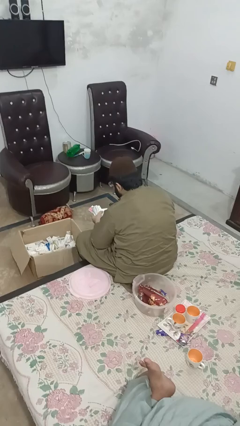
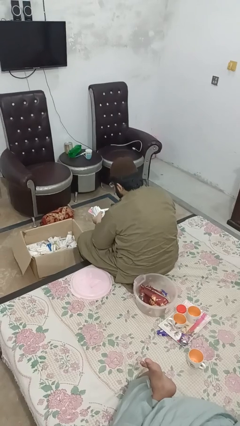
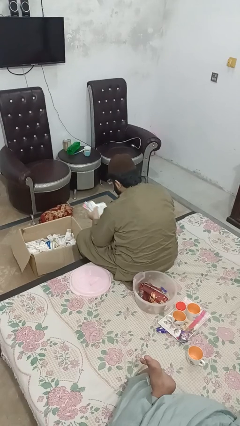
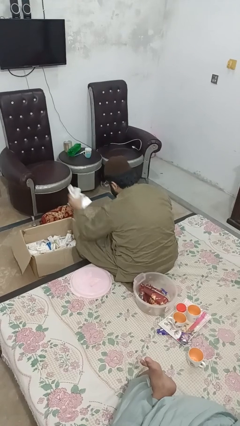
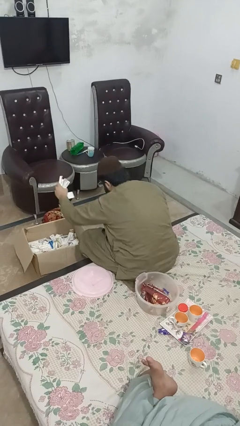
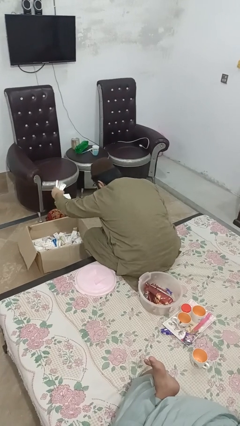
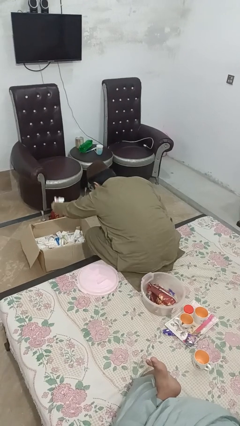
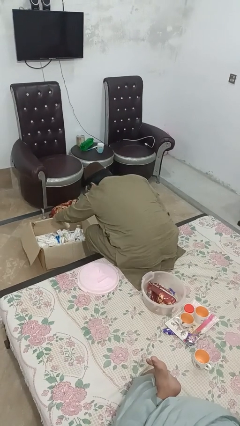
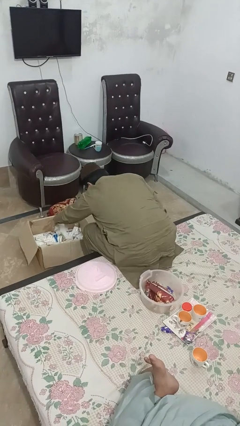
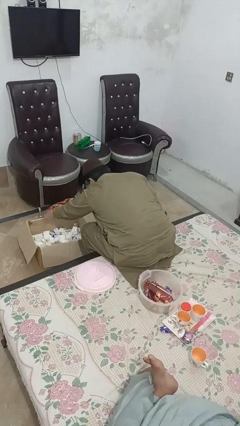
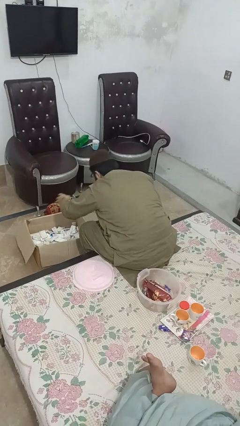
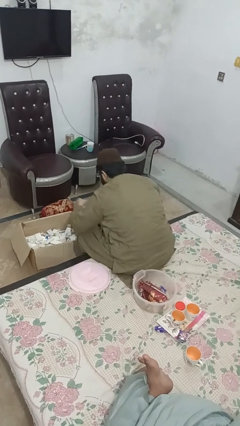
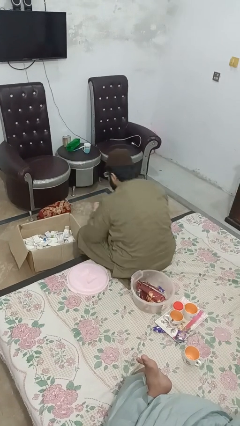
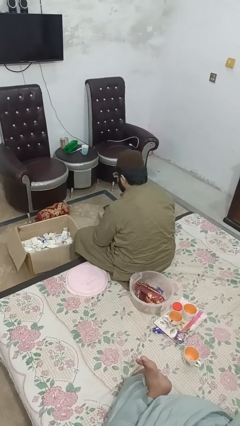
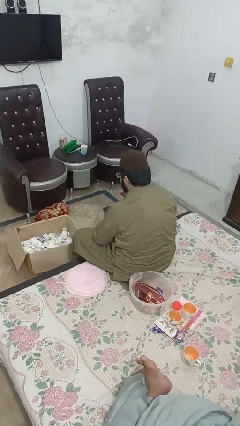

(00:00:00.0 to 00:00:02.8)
person puts object into box

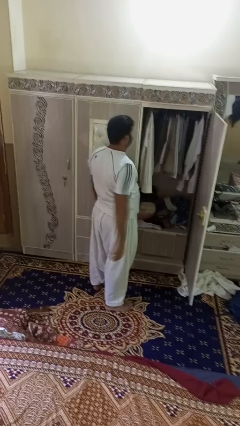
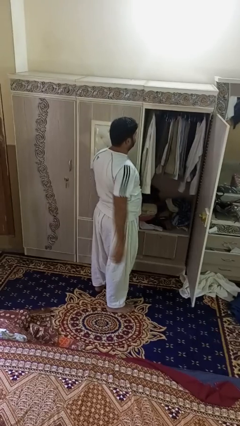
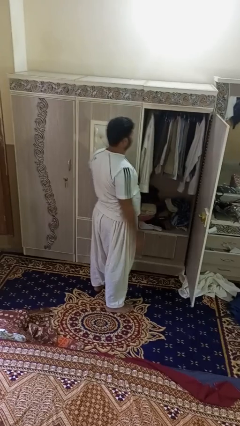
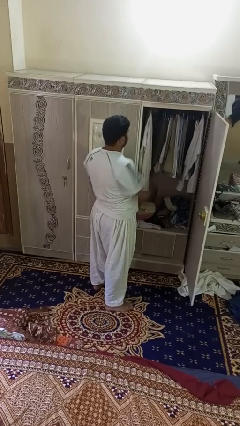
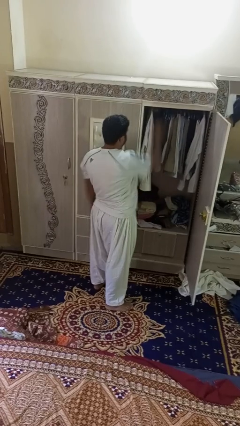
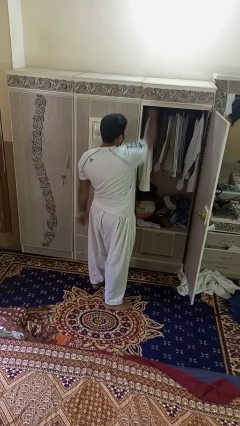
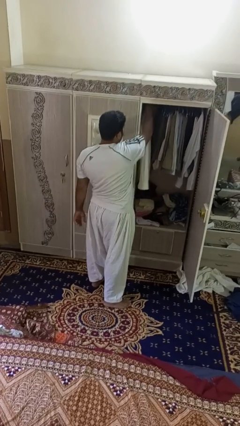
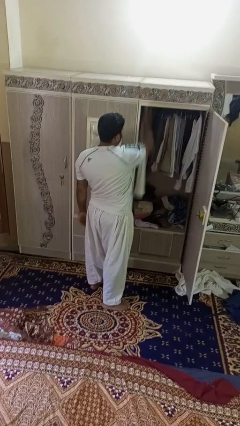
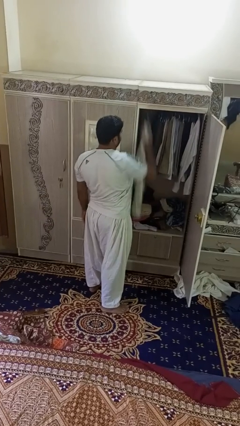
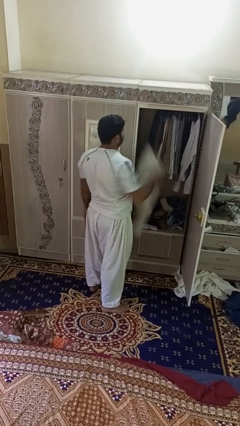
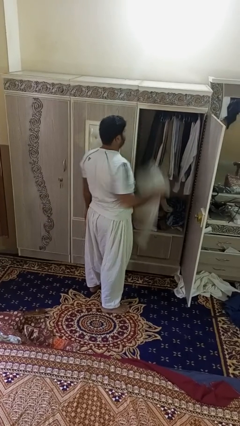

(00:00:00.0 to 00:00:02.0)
person takes clothes from closet

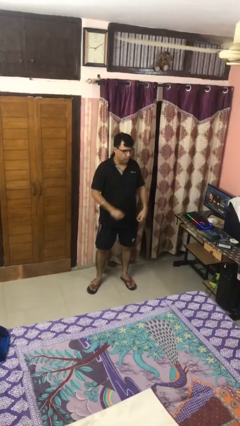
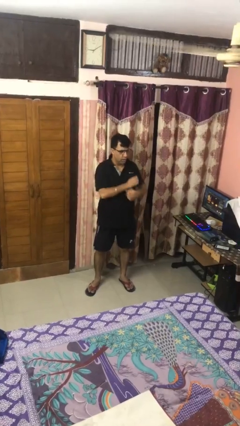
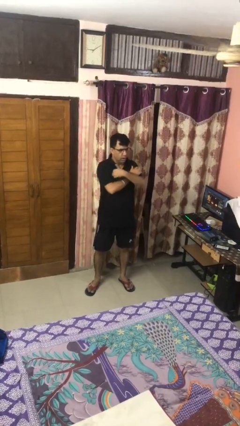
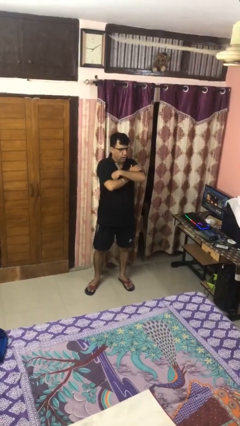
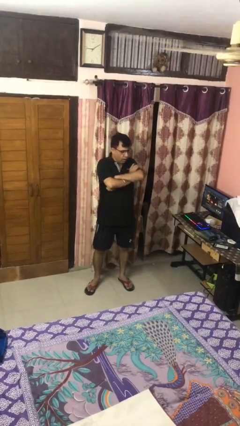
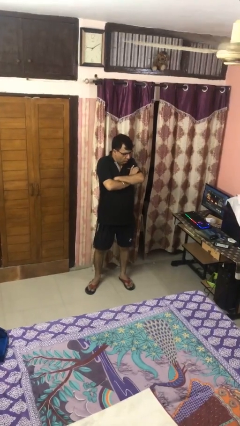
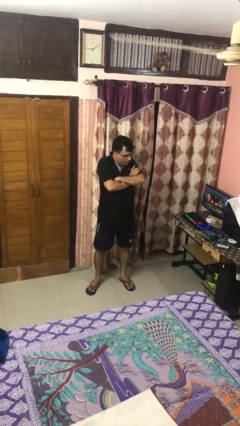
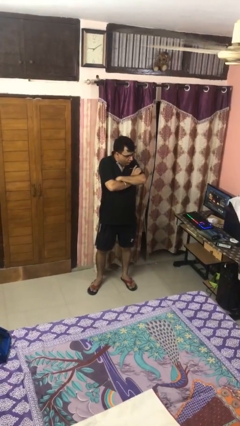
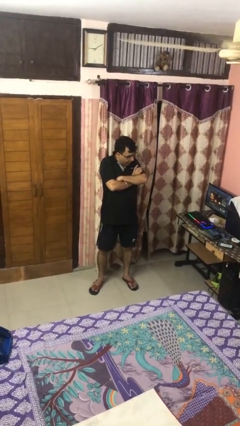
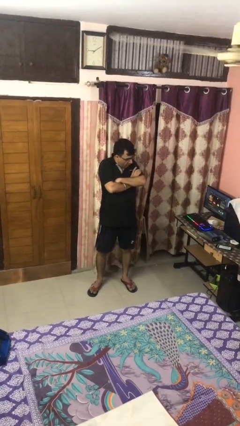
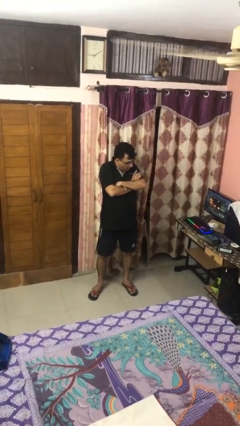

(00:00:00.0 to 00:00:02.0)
person crosses arms

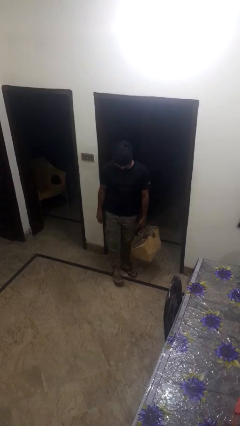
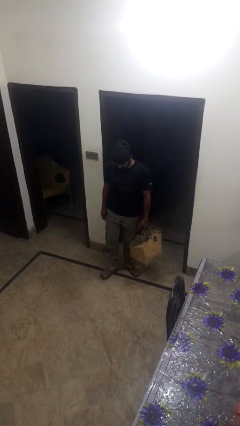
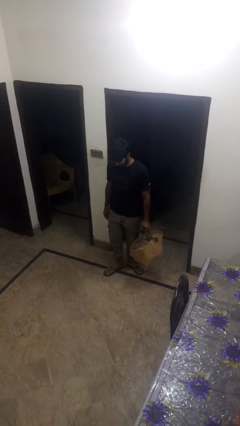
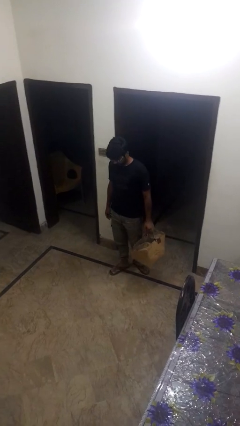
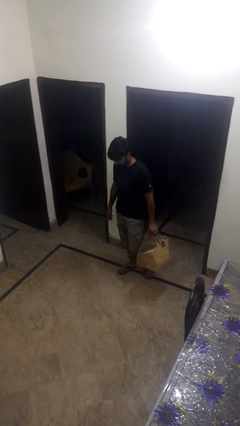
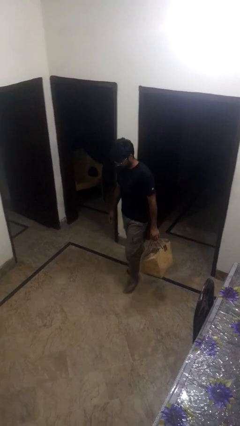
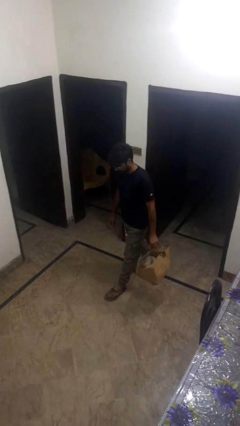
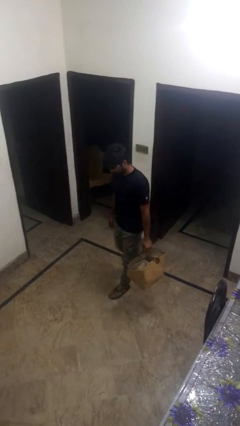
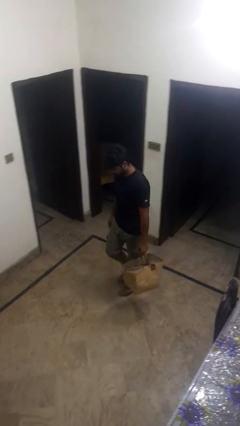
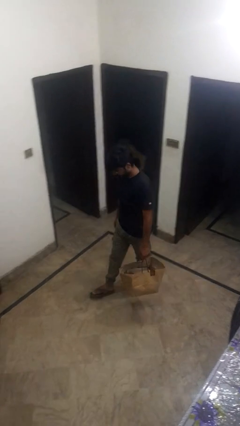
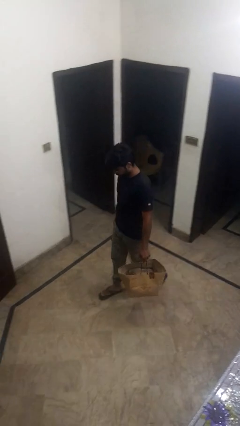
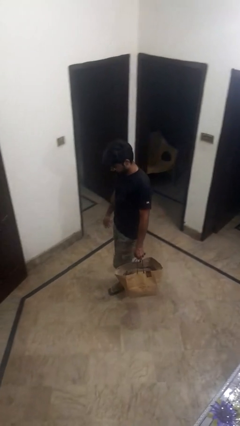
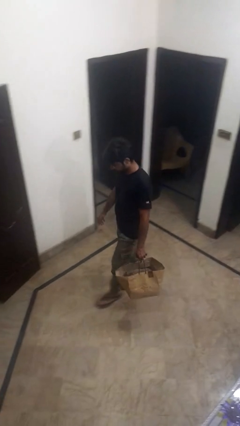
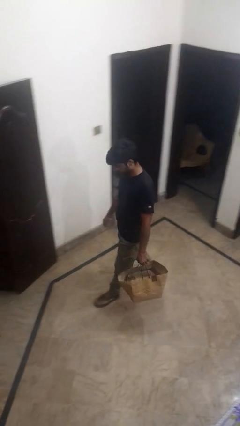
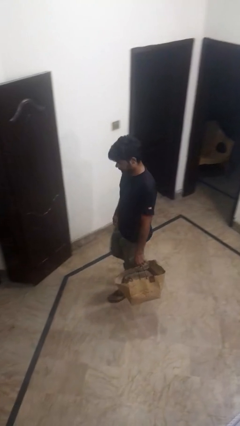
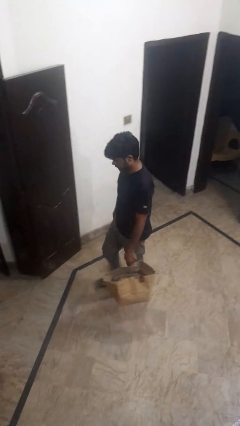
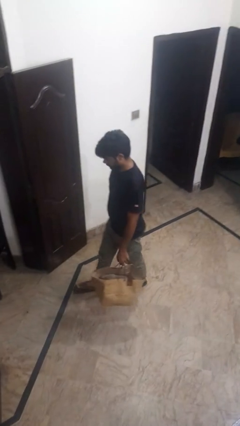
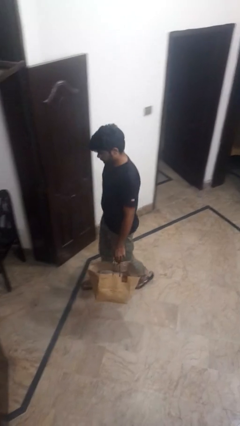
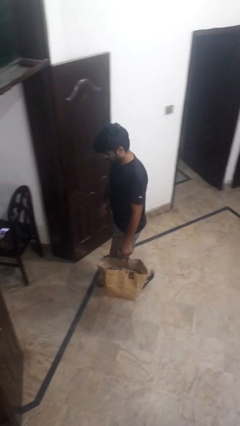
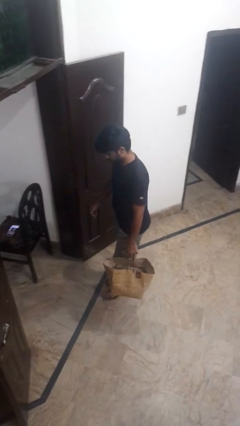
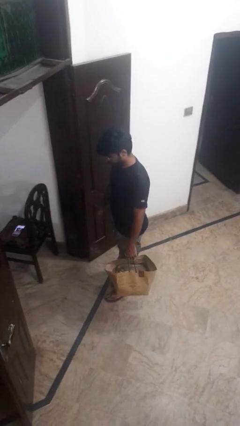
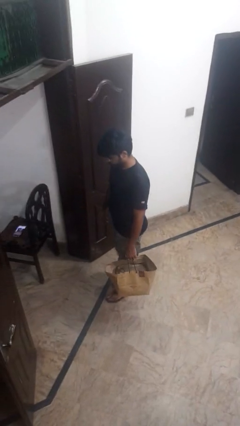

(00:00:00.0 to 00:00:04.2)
person carries groceries

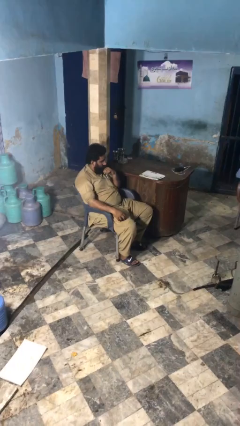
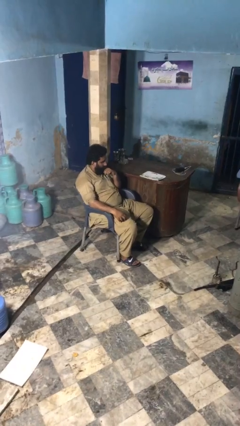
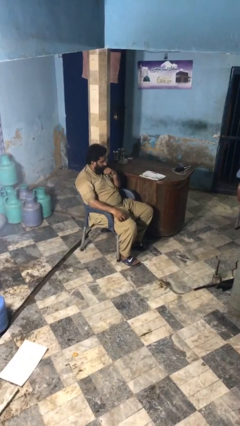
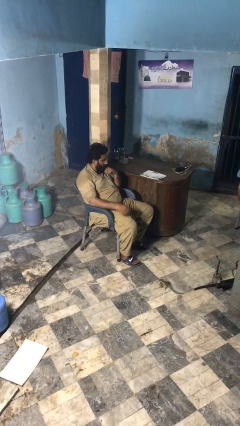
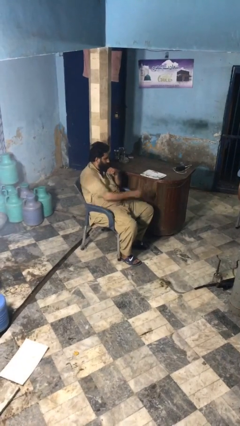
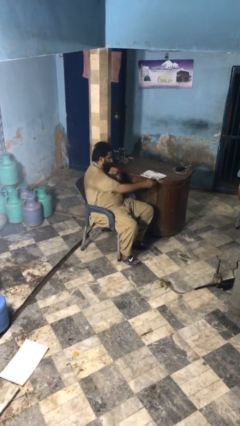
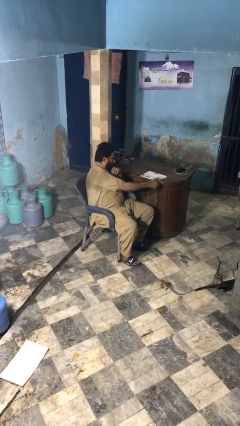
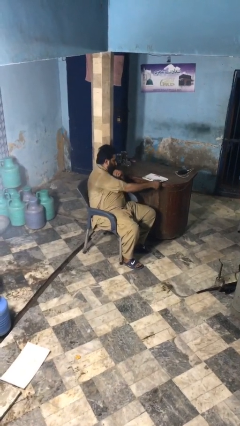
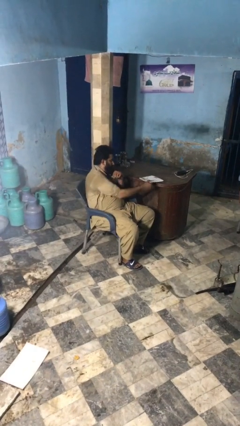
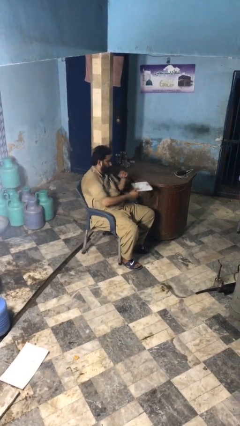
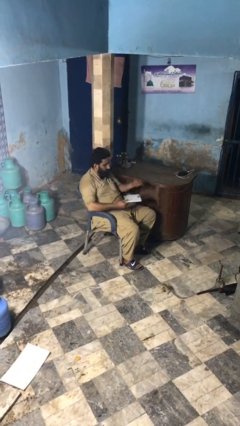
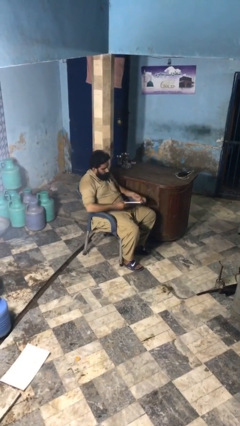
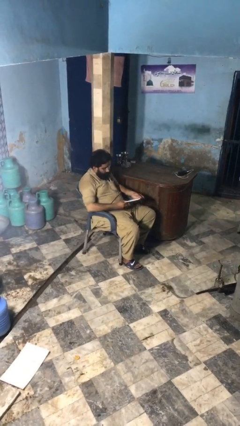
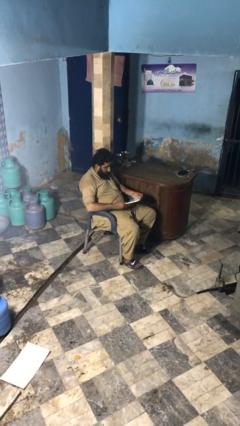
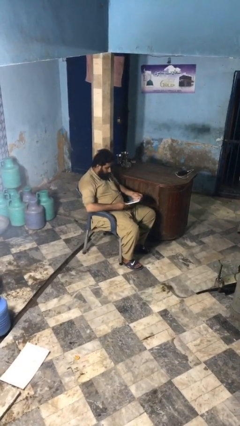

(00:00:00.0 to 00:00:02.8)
person picks up object from table

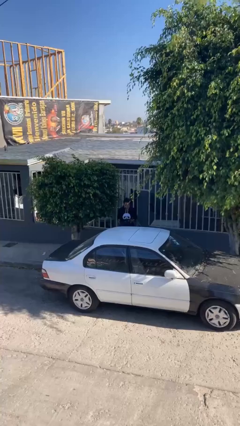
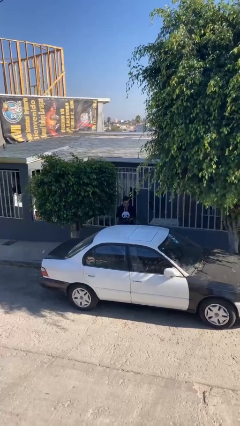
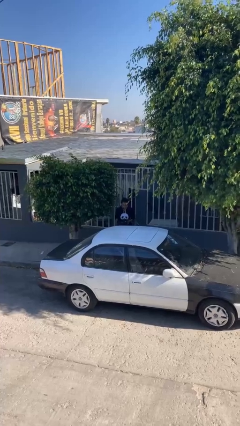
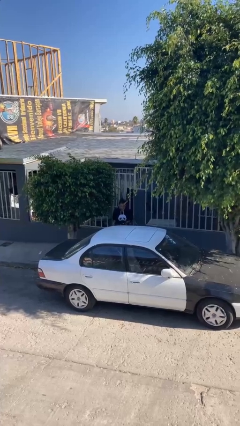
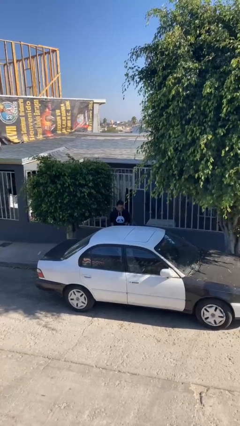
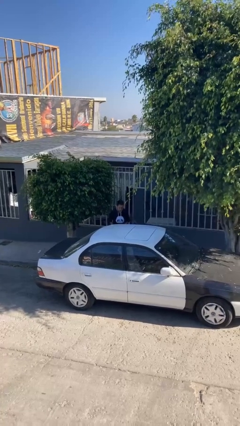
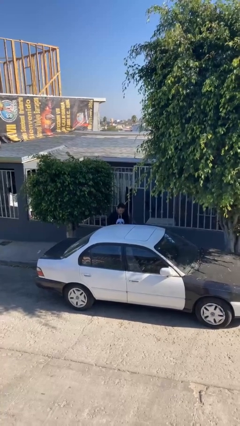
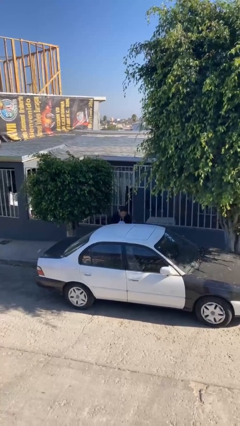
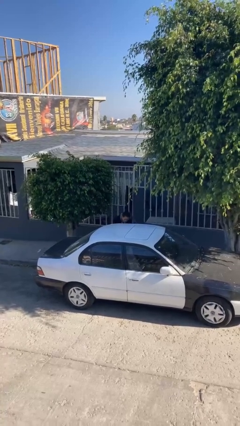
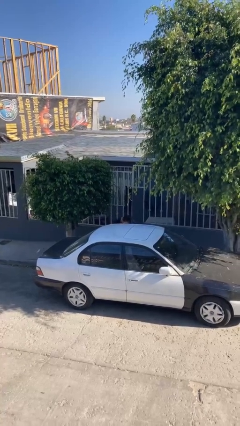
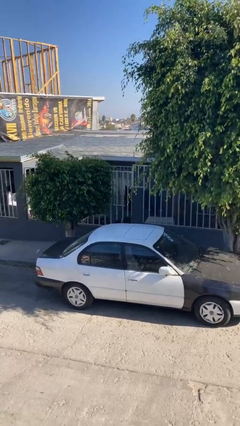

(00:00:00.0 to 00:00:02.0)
person loads car

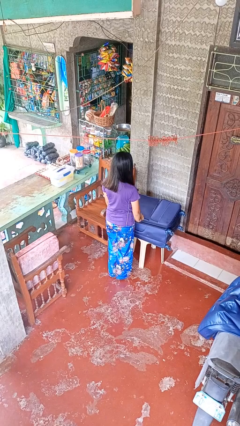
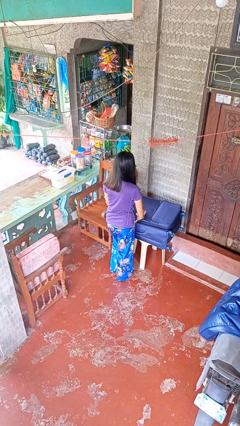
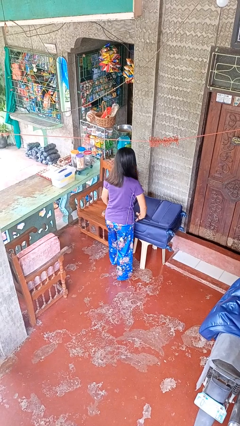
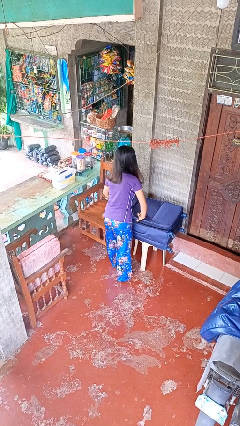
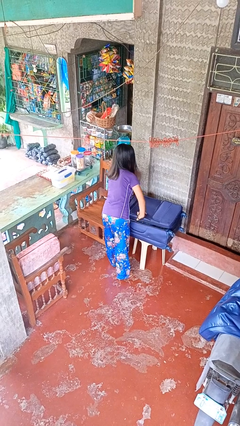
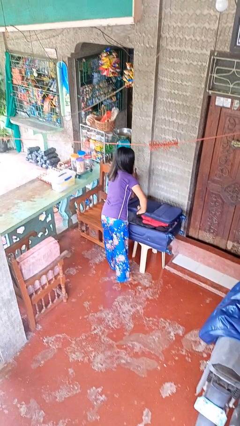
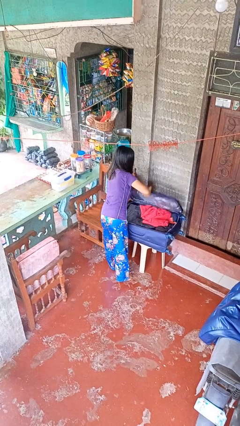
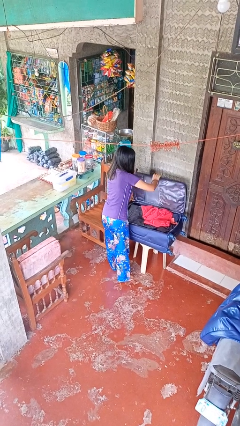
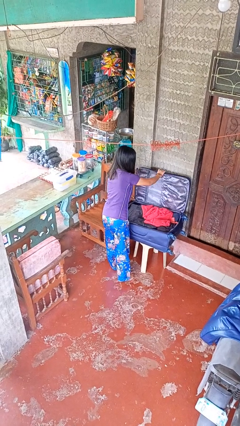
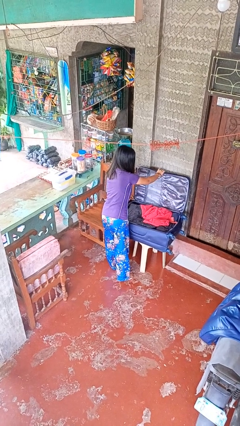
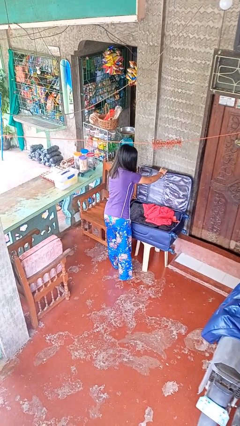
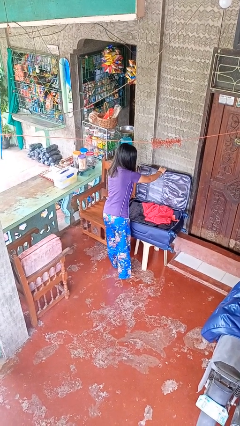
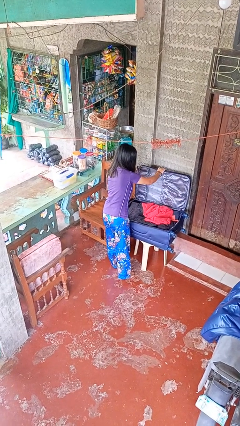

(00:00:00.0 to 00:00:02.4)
person opens suitcase
